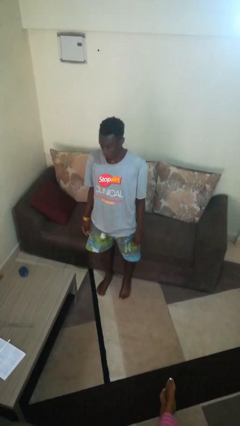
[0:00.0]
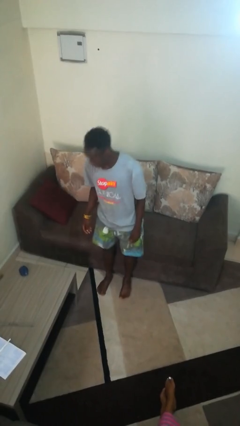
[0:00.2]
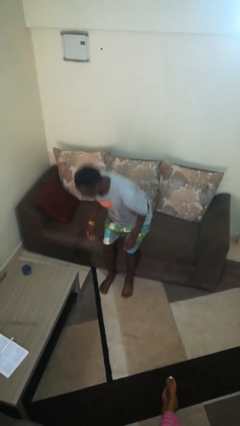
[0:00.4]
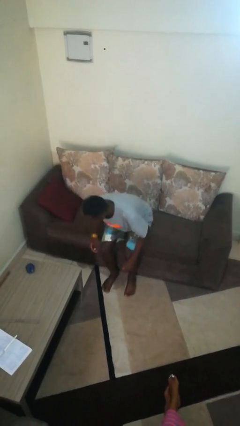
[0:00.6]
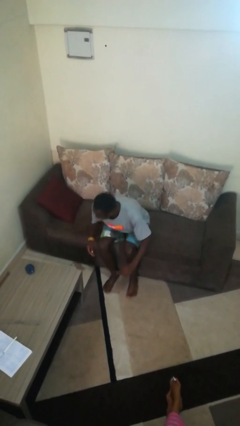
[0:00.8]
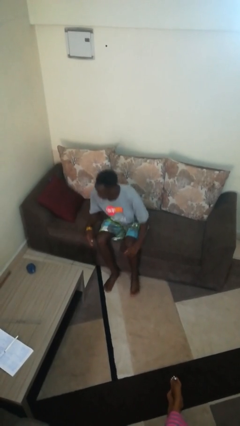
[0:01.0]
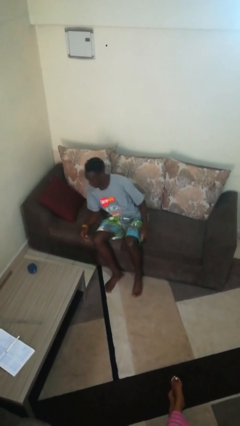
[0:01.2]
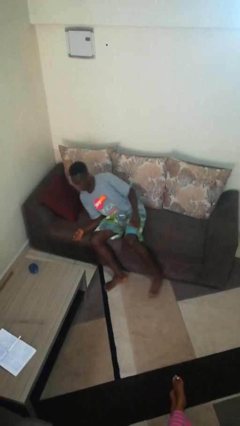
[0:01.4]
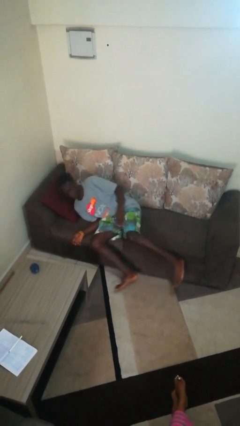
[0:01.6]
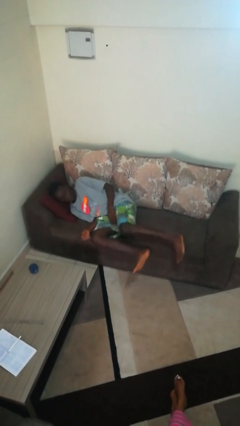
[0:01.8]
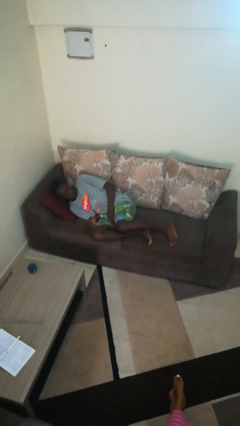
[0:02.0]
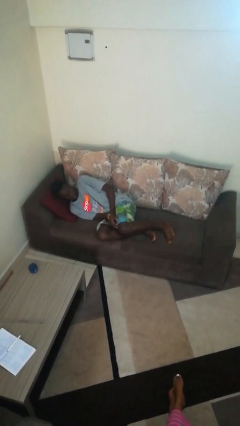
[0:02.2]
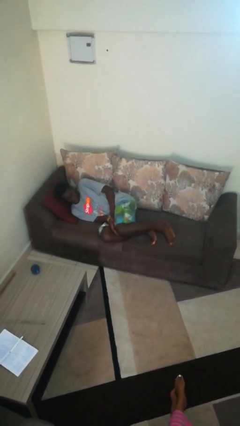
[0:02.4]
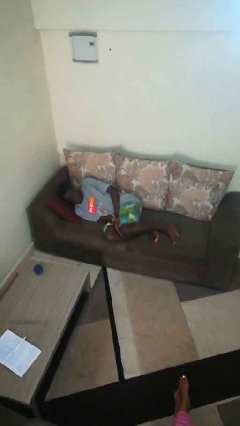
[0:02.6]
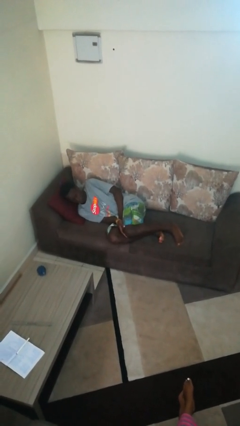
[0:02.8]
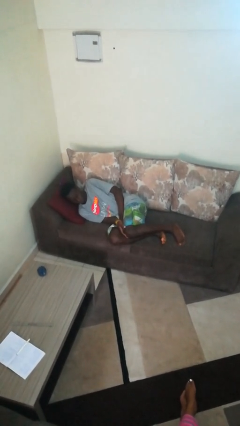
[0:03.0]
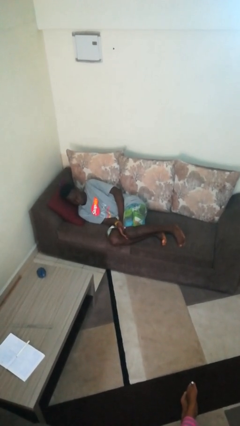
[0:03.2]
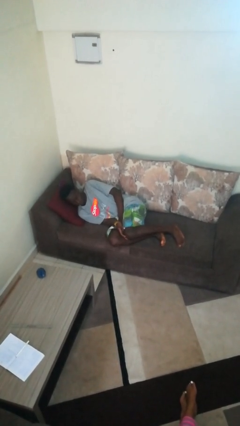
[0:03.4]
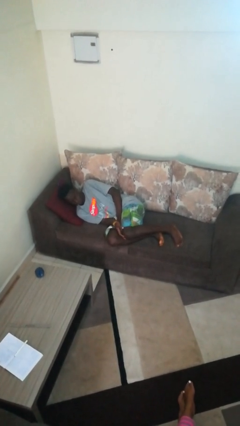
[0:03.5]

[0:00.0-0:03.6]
person lies down on couch

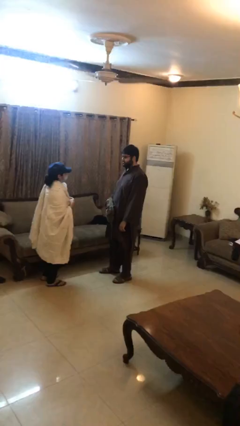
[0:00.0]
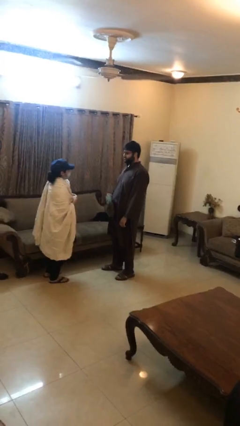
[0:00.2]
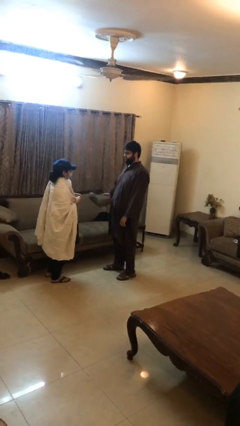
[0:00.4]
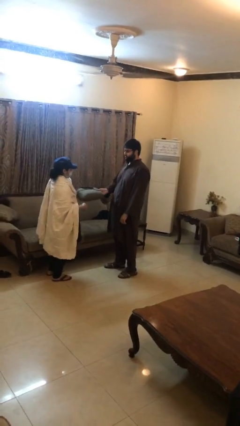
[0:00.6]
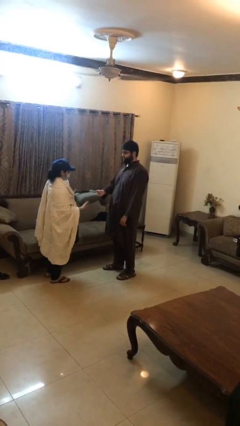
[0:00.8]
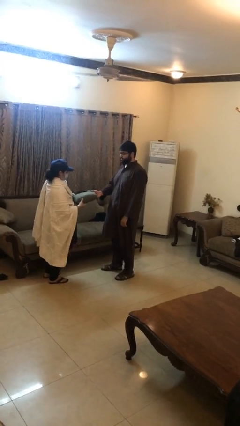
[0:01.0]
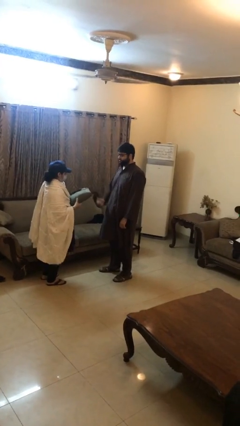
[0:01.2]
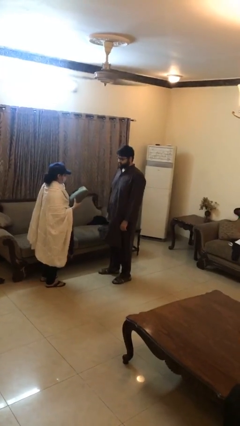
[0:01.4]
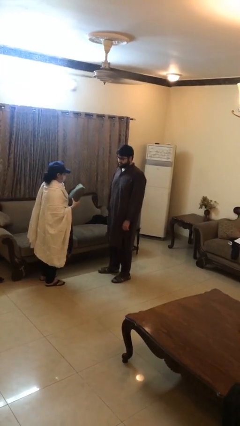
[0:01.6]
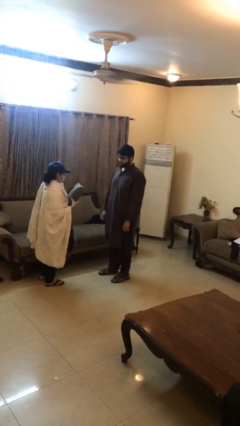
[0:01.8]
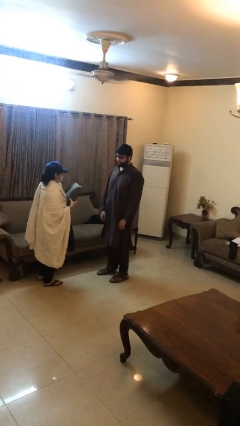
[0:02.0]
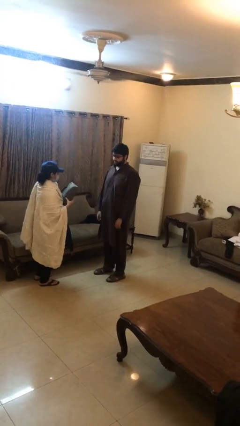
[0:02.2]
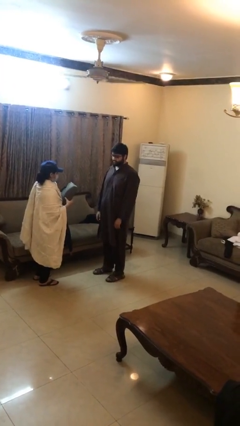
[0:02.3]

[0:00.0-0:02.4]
person transfers object to person

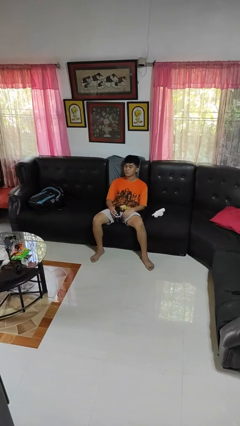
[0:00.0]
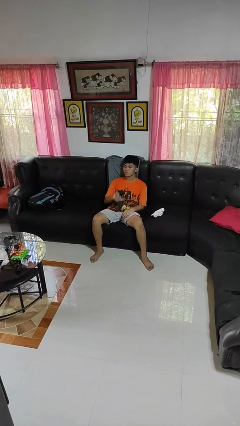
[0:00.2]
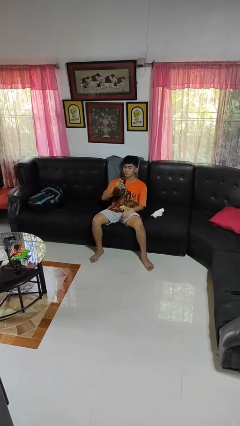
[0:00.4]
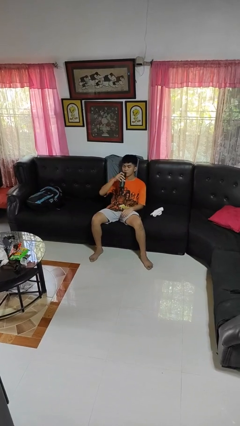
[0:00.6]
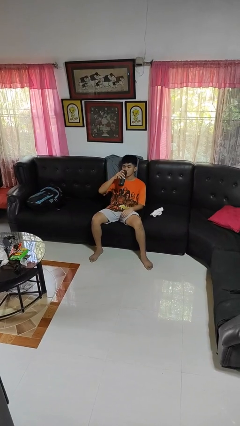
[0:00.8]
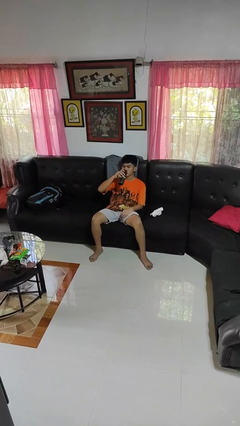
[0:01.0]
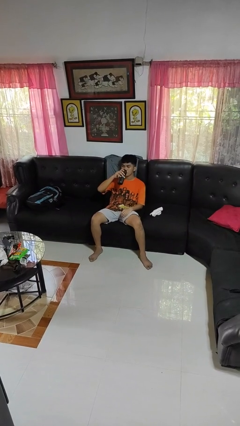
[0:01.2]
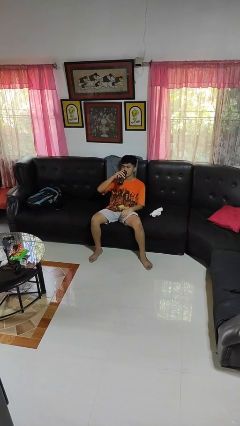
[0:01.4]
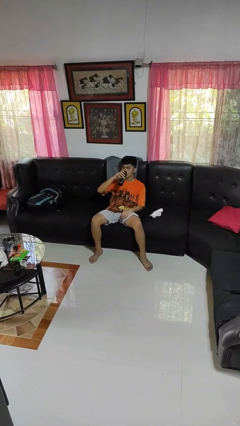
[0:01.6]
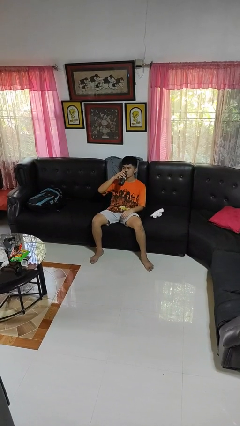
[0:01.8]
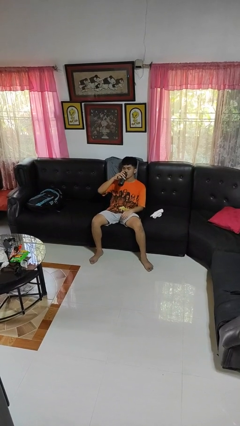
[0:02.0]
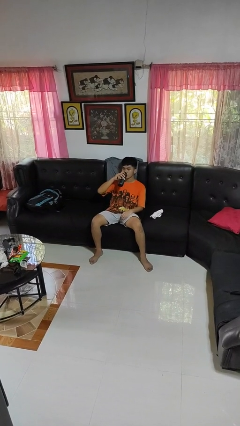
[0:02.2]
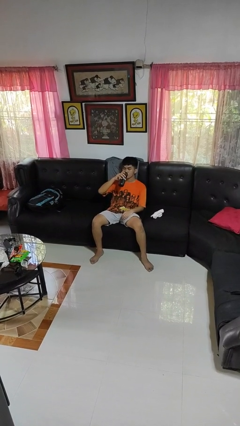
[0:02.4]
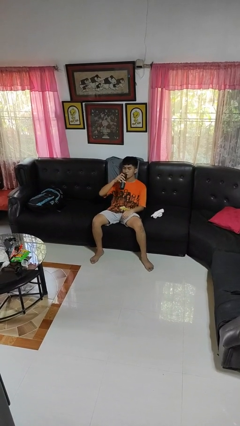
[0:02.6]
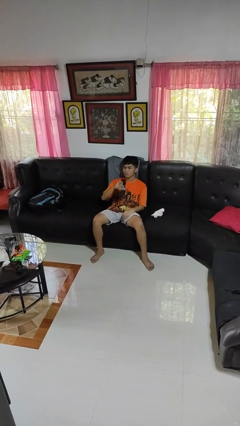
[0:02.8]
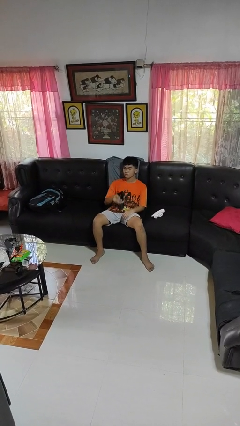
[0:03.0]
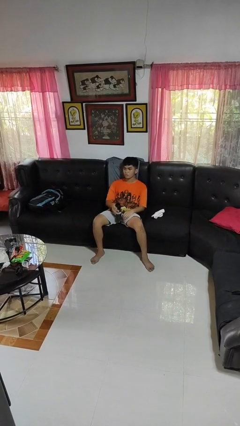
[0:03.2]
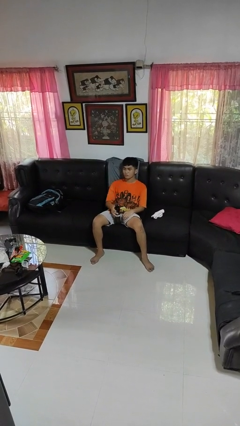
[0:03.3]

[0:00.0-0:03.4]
person drinks from bottle

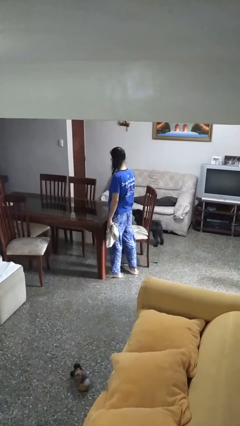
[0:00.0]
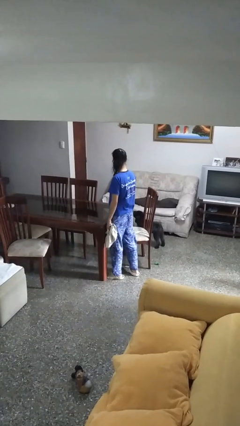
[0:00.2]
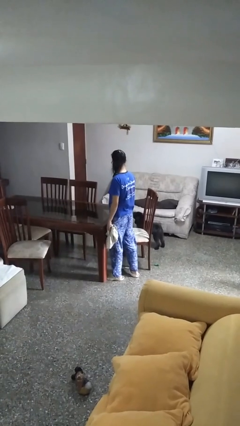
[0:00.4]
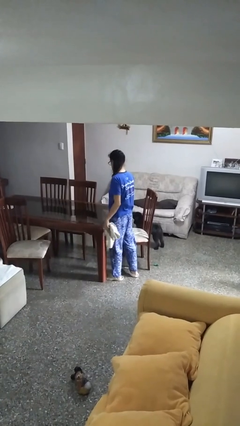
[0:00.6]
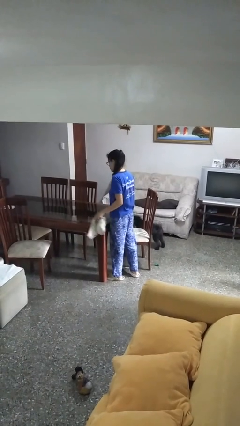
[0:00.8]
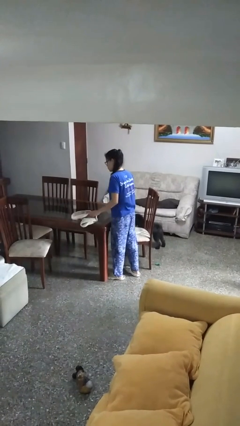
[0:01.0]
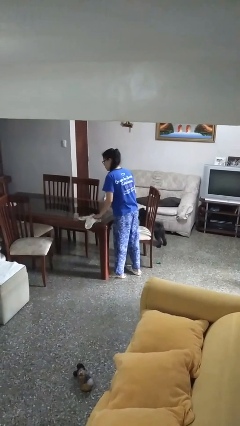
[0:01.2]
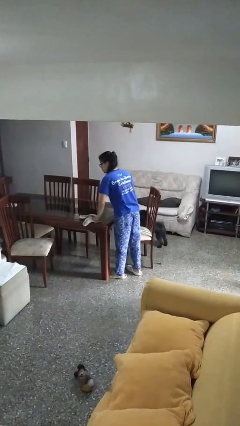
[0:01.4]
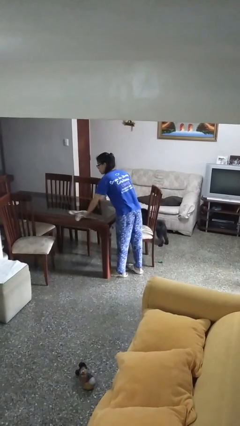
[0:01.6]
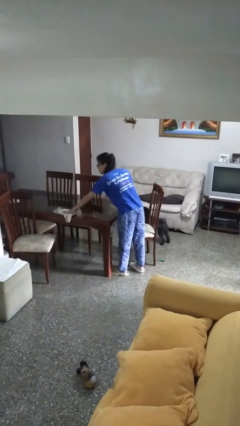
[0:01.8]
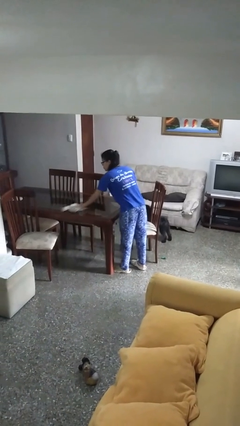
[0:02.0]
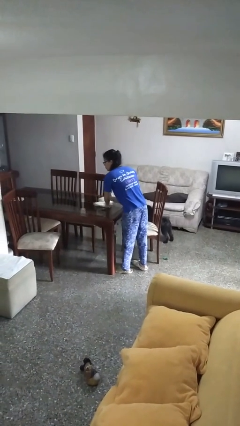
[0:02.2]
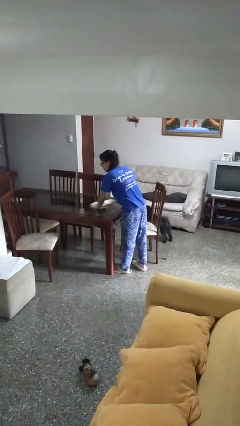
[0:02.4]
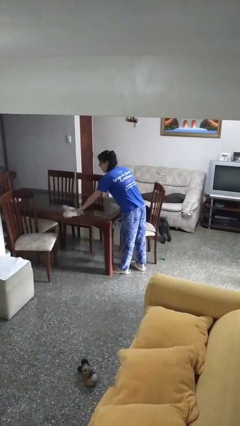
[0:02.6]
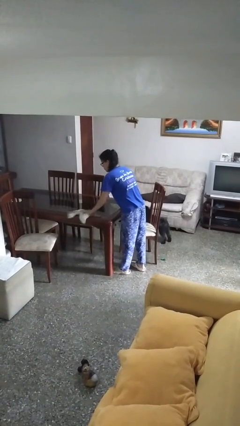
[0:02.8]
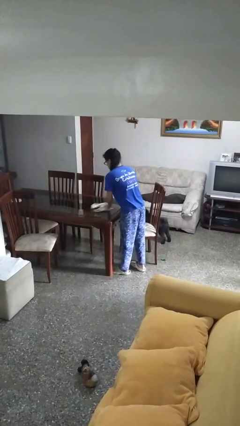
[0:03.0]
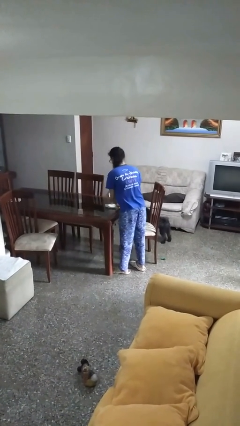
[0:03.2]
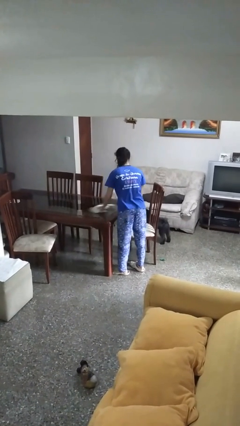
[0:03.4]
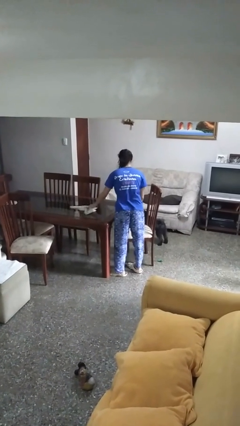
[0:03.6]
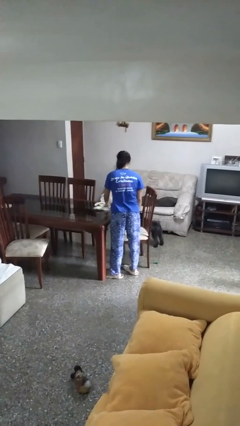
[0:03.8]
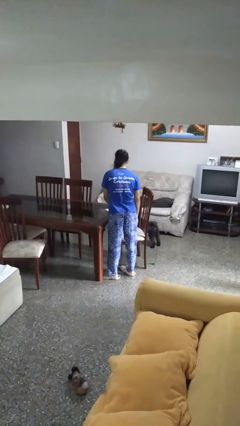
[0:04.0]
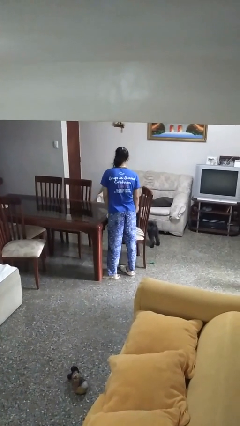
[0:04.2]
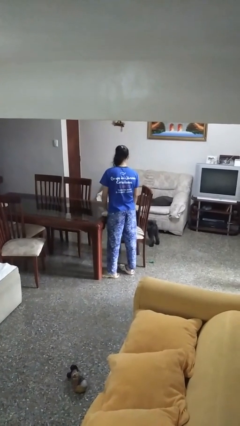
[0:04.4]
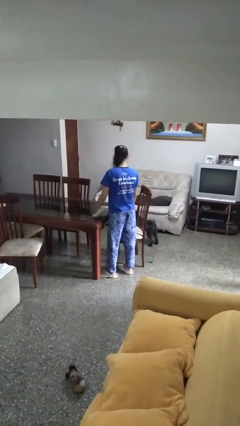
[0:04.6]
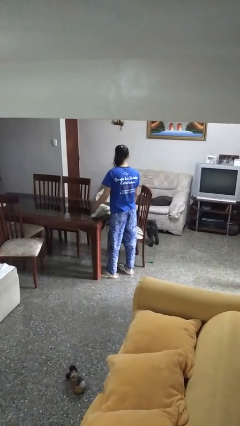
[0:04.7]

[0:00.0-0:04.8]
person cleans table with rag

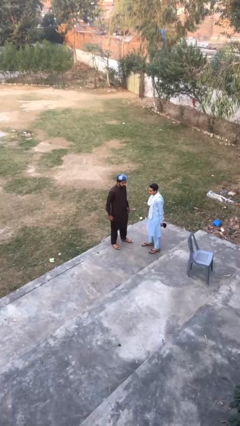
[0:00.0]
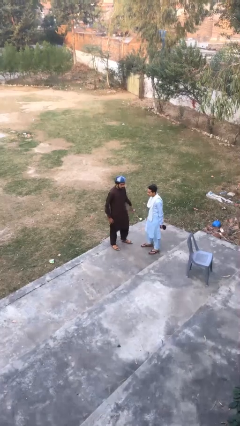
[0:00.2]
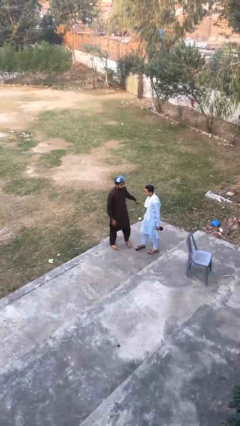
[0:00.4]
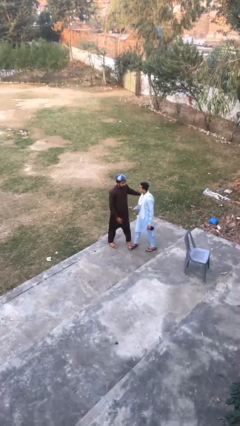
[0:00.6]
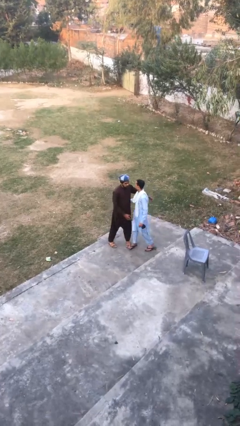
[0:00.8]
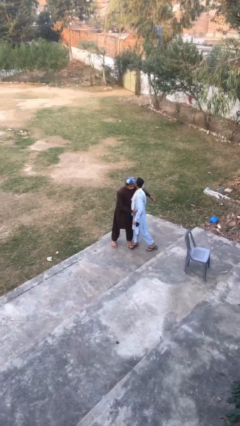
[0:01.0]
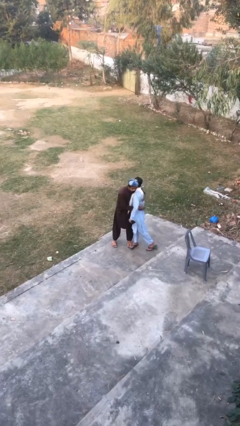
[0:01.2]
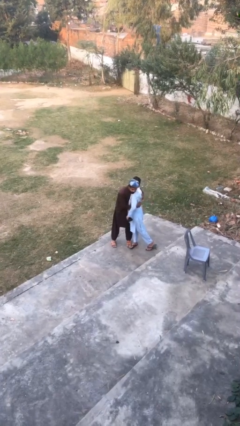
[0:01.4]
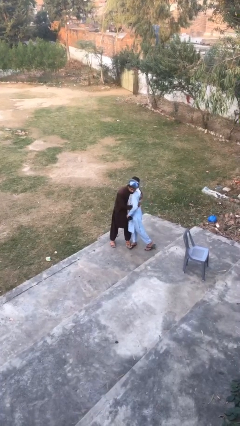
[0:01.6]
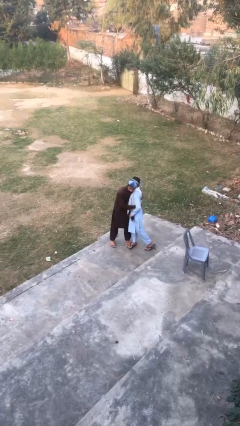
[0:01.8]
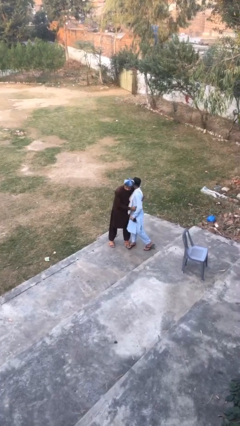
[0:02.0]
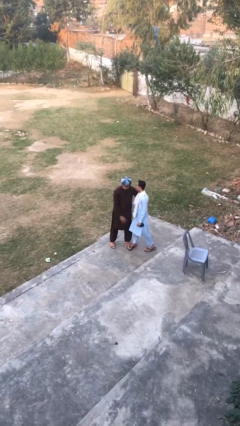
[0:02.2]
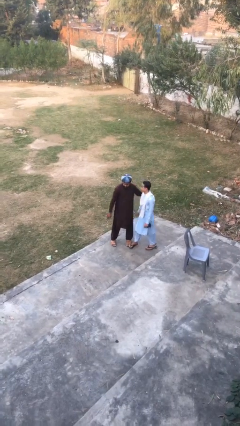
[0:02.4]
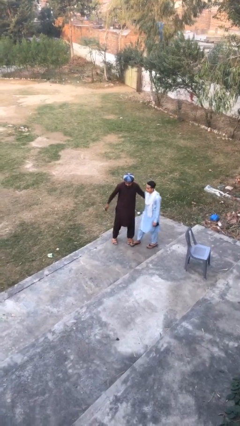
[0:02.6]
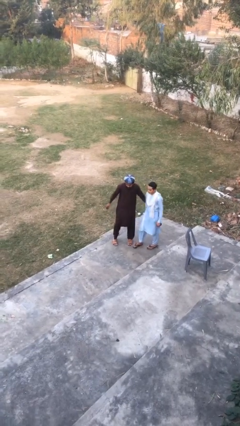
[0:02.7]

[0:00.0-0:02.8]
person embraces person

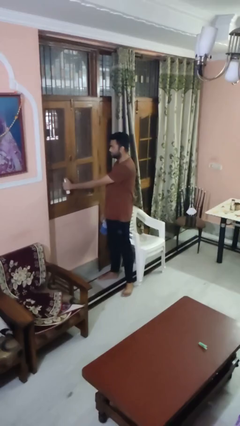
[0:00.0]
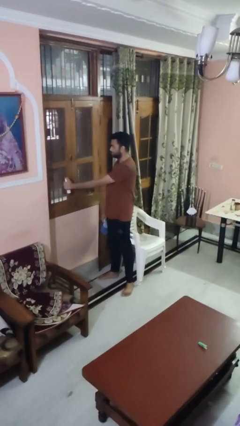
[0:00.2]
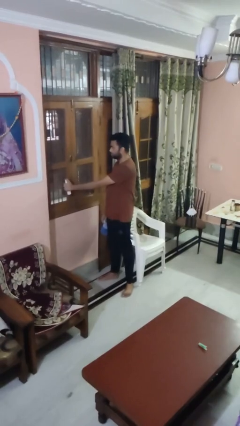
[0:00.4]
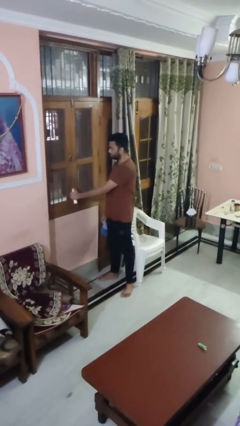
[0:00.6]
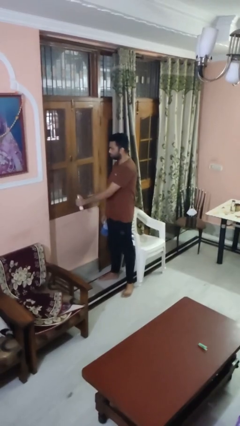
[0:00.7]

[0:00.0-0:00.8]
person sprays from bottle
